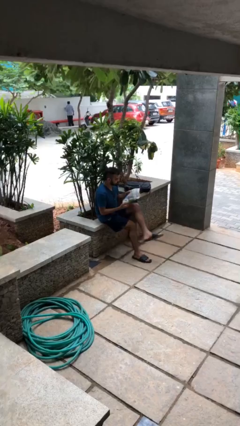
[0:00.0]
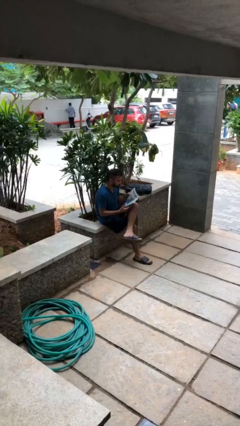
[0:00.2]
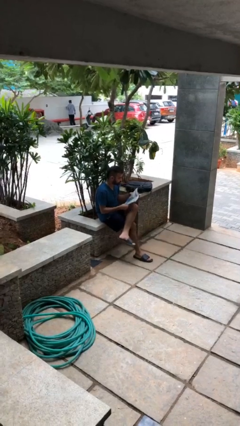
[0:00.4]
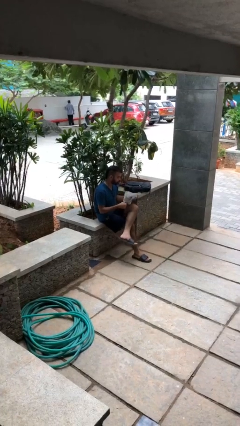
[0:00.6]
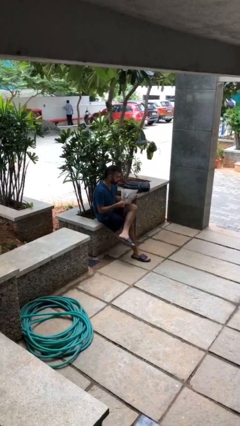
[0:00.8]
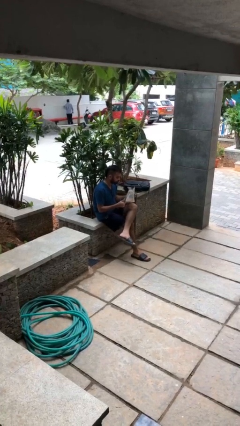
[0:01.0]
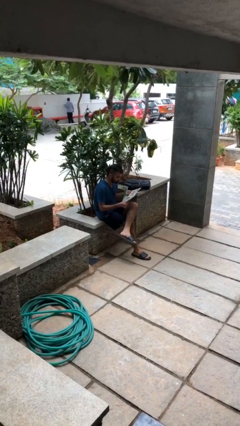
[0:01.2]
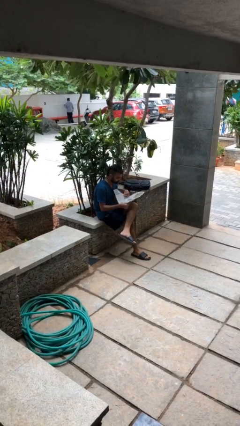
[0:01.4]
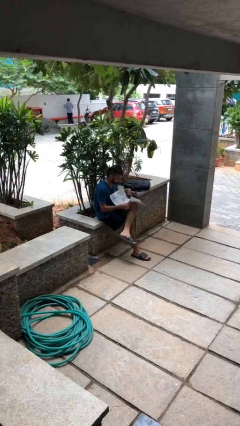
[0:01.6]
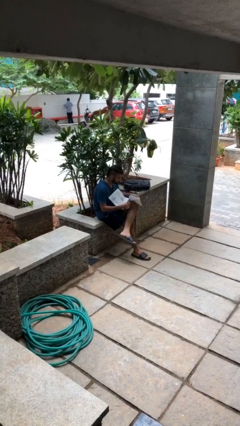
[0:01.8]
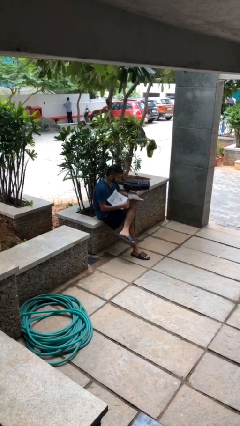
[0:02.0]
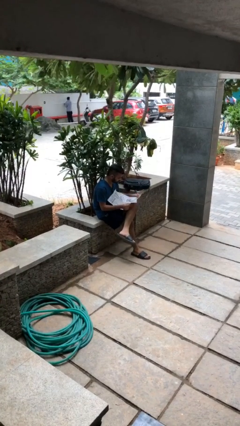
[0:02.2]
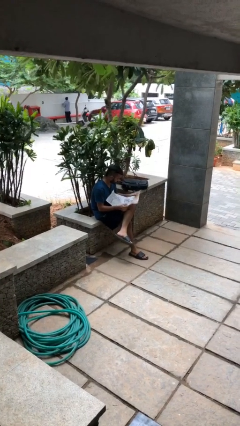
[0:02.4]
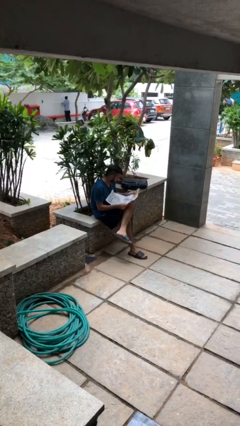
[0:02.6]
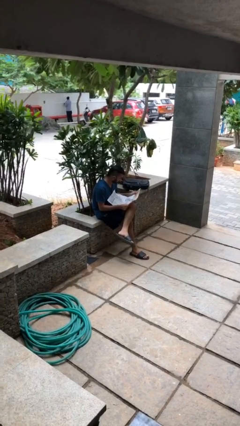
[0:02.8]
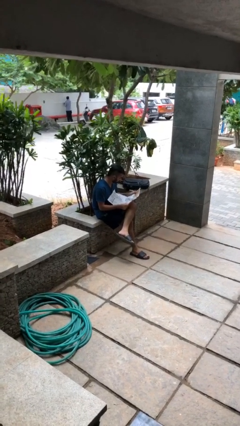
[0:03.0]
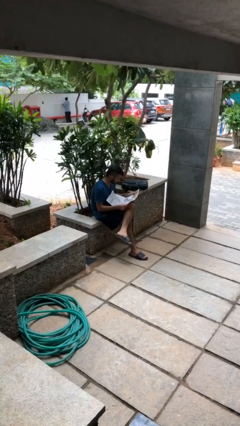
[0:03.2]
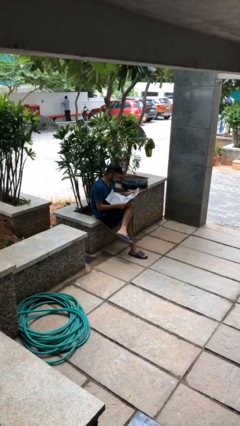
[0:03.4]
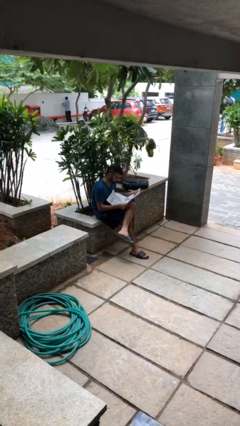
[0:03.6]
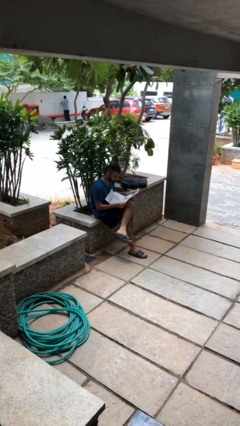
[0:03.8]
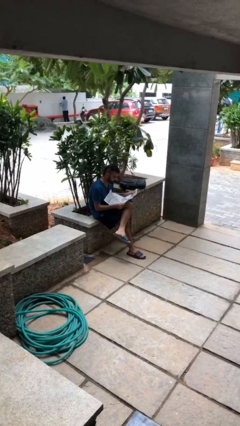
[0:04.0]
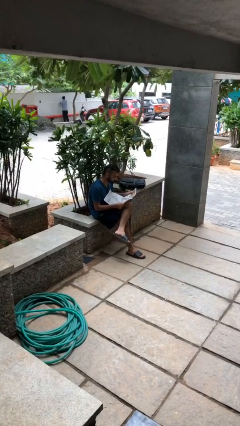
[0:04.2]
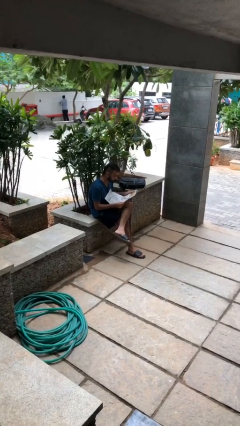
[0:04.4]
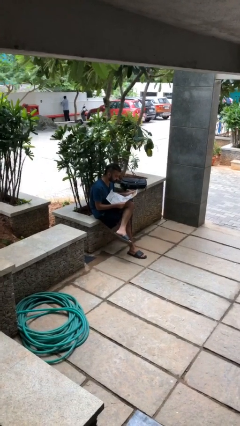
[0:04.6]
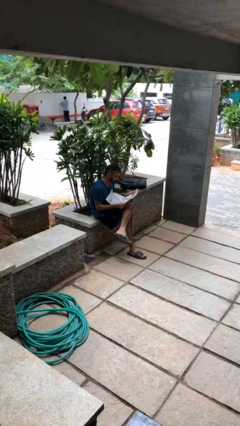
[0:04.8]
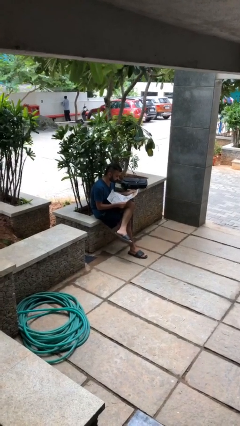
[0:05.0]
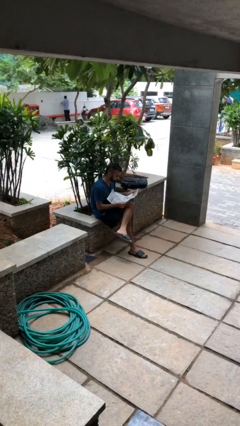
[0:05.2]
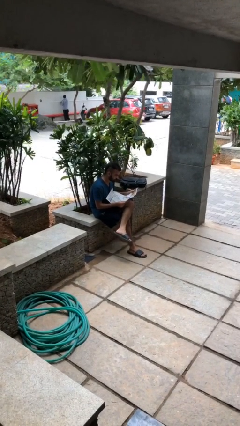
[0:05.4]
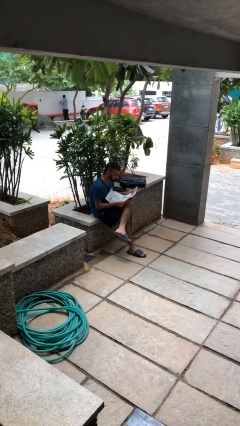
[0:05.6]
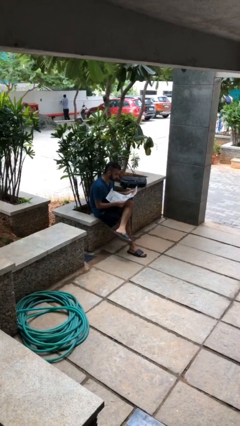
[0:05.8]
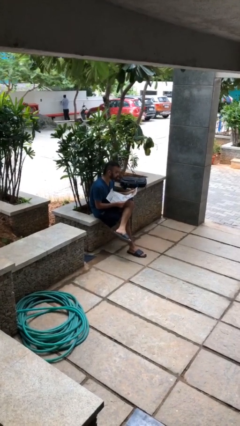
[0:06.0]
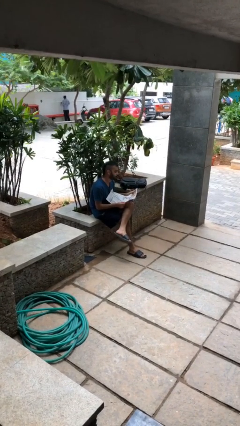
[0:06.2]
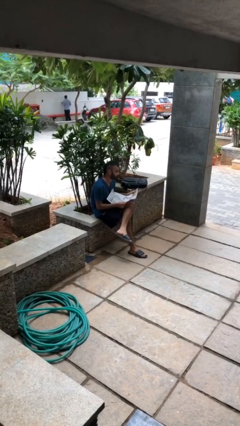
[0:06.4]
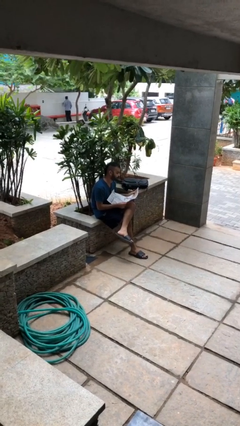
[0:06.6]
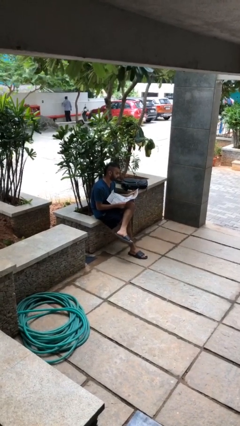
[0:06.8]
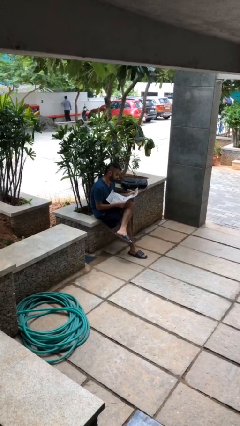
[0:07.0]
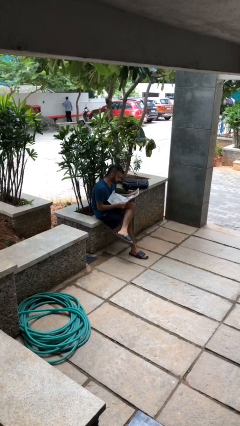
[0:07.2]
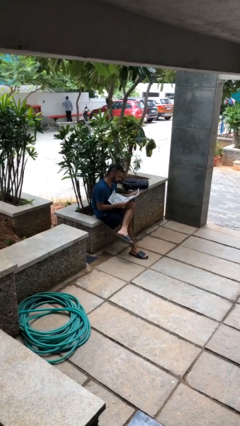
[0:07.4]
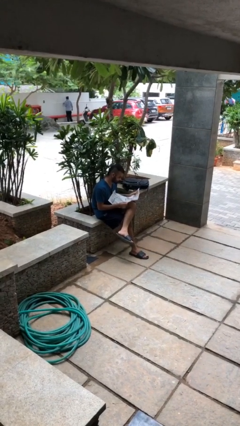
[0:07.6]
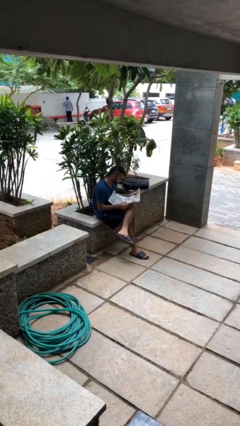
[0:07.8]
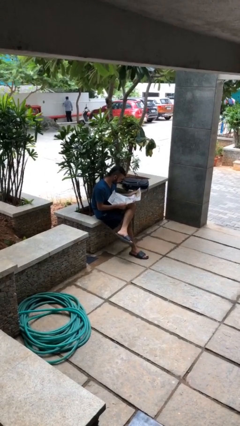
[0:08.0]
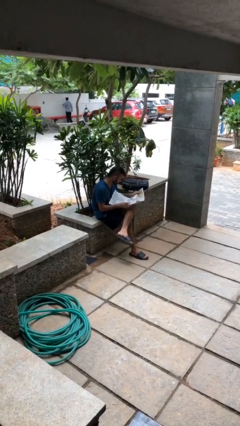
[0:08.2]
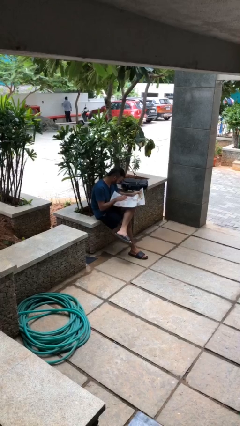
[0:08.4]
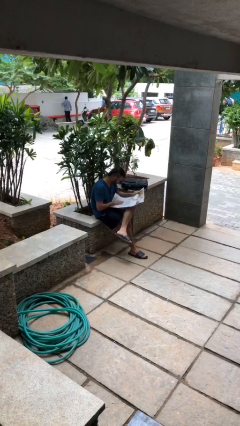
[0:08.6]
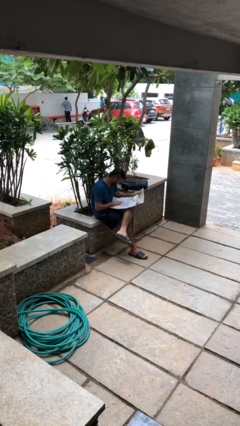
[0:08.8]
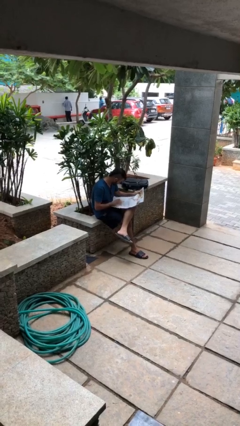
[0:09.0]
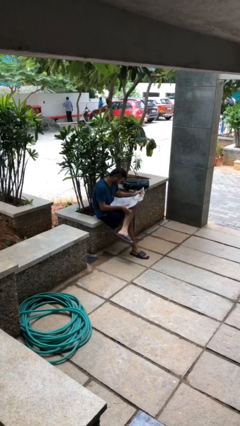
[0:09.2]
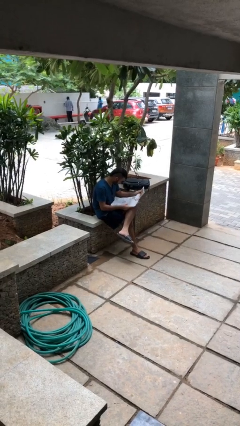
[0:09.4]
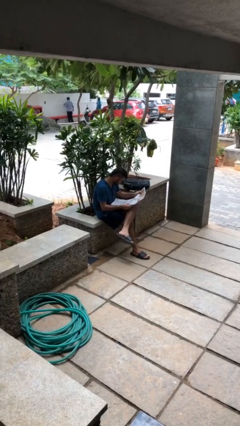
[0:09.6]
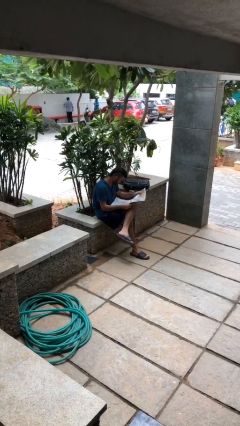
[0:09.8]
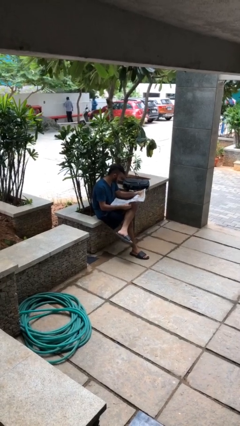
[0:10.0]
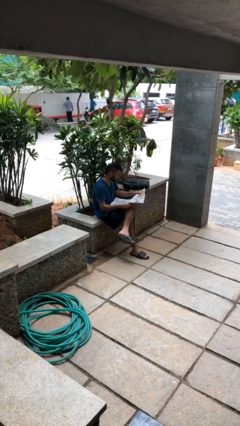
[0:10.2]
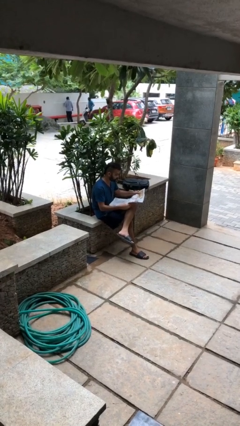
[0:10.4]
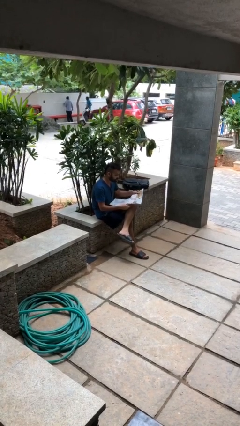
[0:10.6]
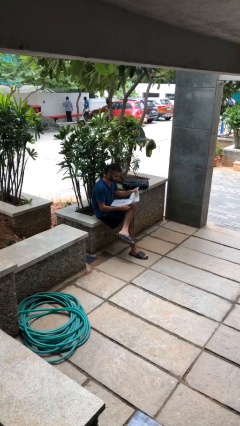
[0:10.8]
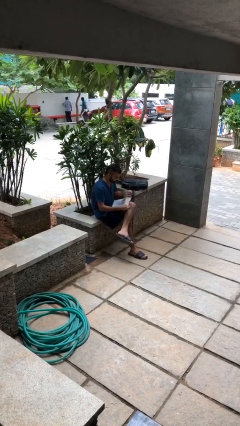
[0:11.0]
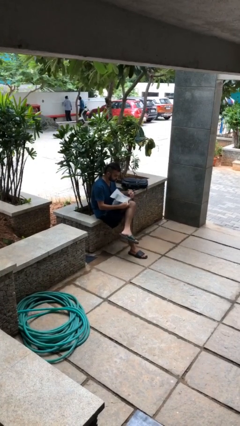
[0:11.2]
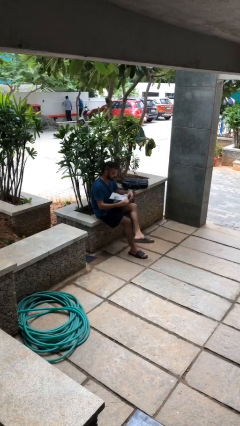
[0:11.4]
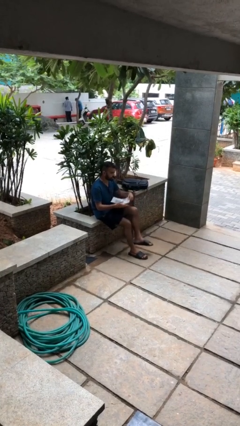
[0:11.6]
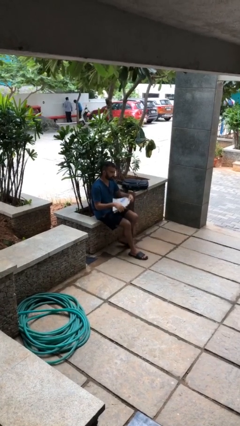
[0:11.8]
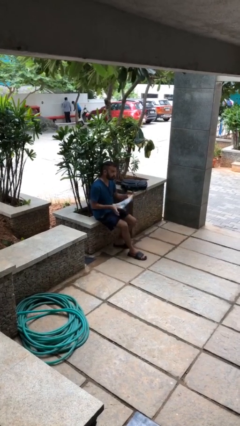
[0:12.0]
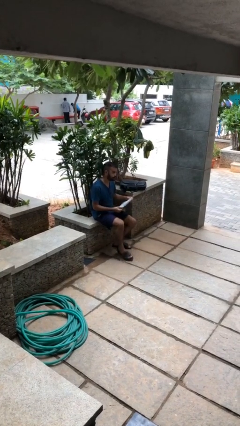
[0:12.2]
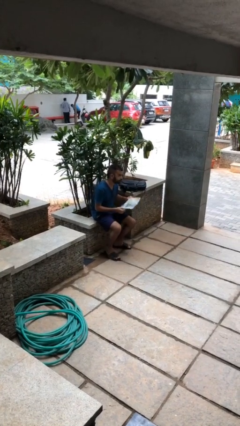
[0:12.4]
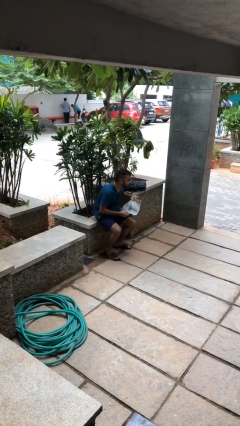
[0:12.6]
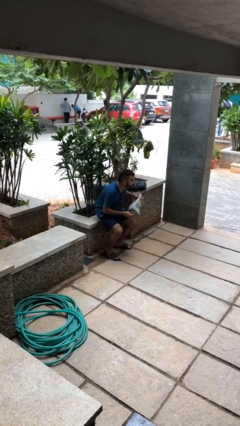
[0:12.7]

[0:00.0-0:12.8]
person reads document

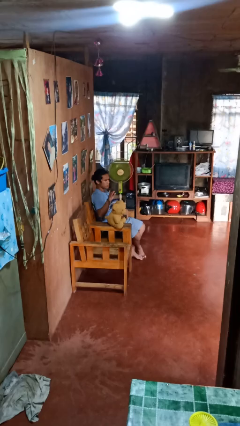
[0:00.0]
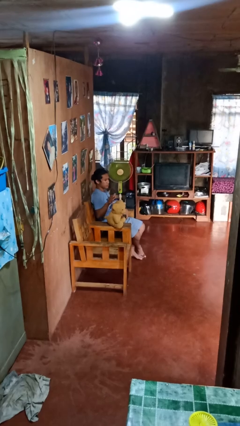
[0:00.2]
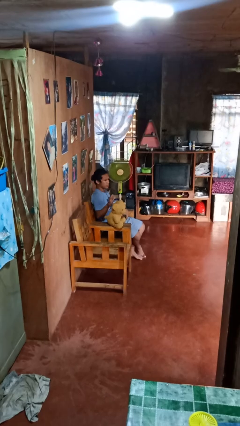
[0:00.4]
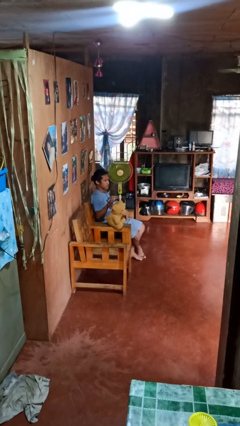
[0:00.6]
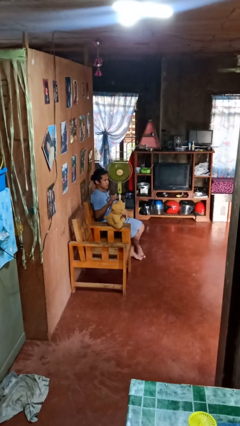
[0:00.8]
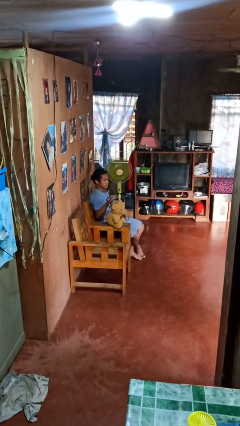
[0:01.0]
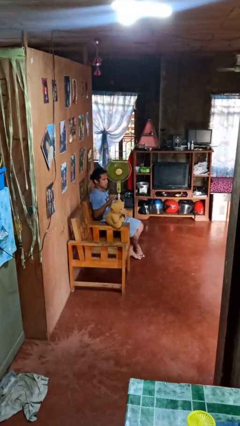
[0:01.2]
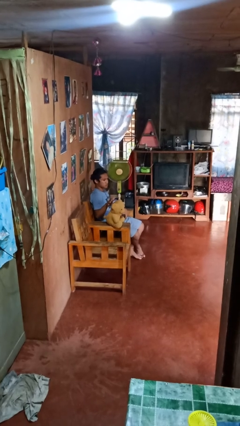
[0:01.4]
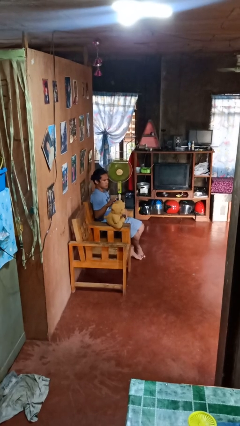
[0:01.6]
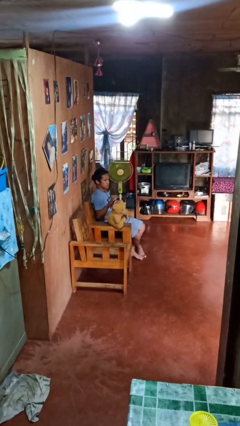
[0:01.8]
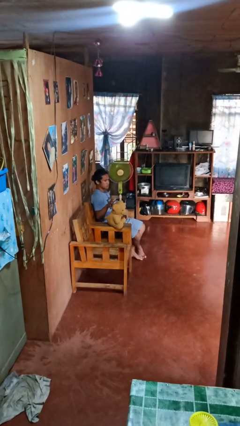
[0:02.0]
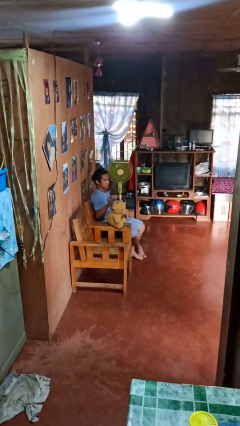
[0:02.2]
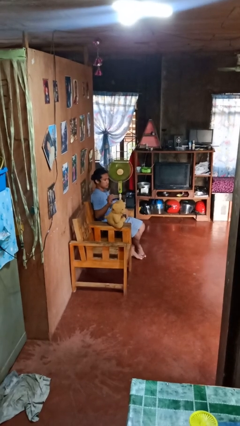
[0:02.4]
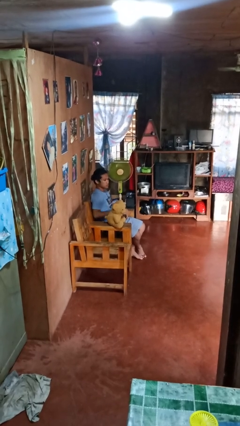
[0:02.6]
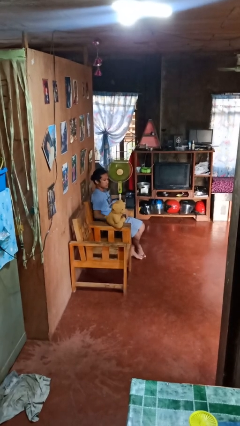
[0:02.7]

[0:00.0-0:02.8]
person waves hand over object

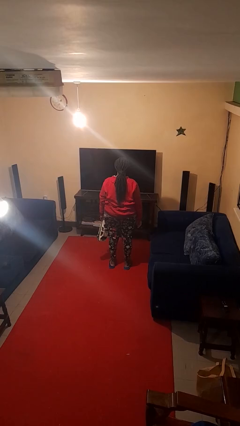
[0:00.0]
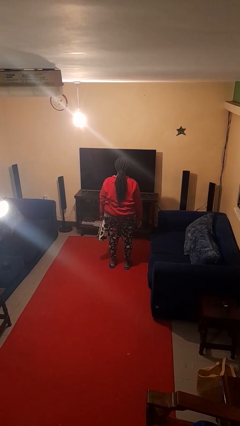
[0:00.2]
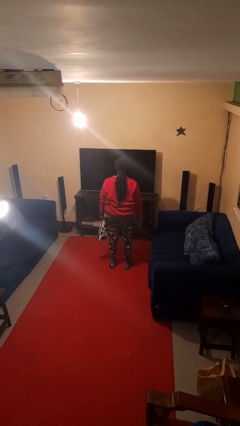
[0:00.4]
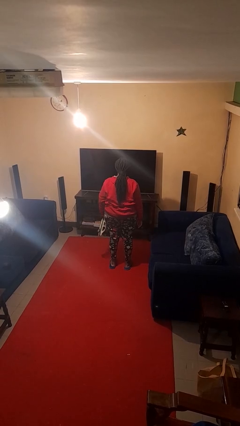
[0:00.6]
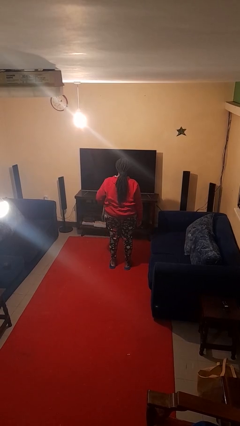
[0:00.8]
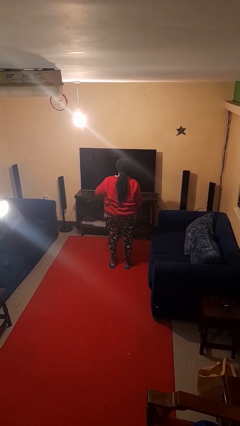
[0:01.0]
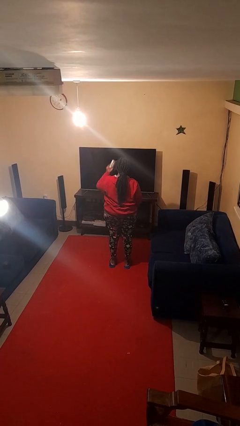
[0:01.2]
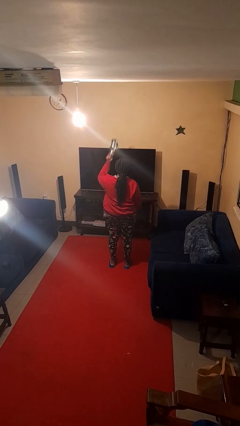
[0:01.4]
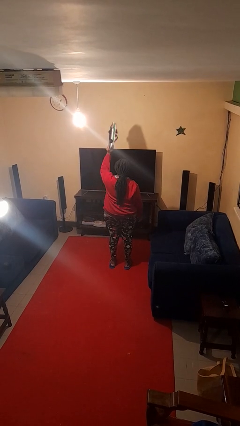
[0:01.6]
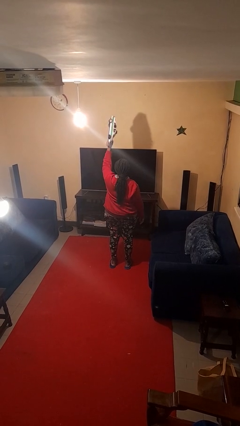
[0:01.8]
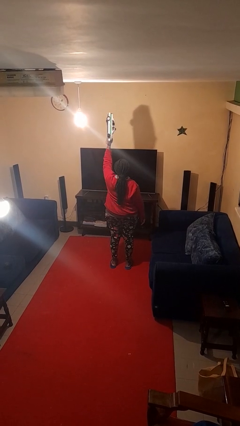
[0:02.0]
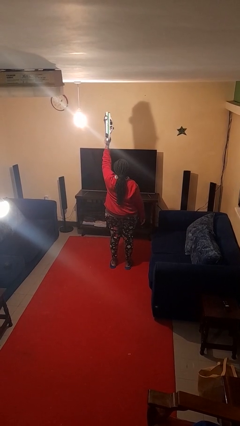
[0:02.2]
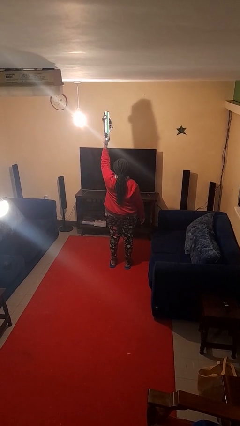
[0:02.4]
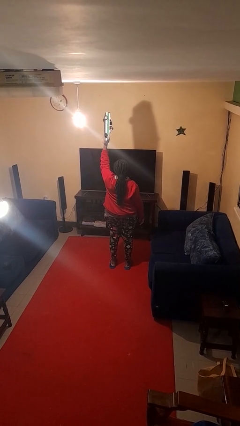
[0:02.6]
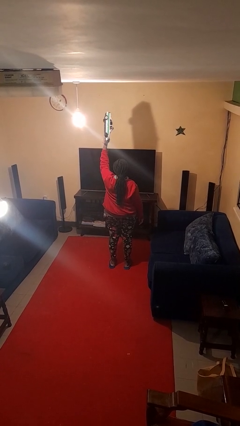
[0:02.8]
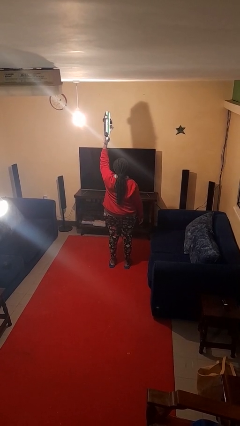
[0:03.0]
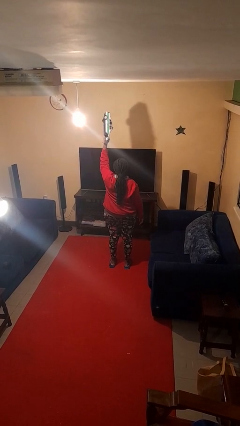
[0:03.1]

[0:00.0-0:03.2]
person holds object above head
